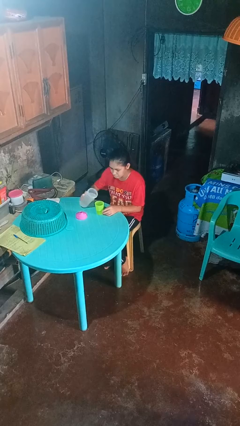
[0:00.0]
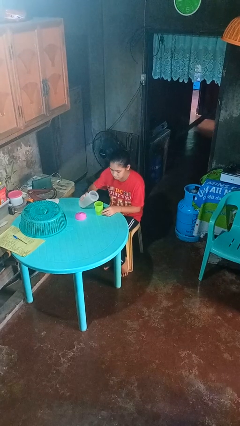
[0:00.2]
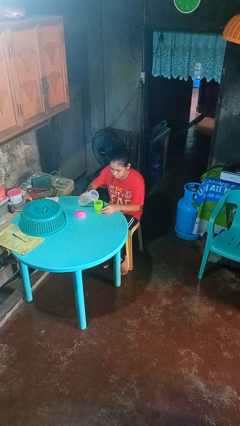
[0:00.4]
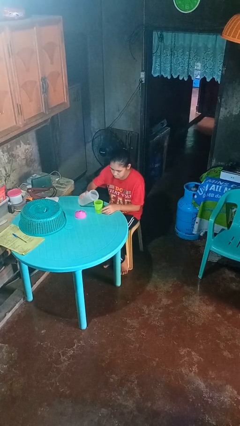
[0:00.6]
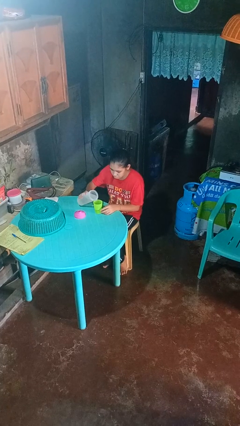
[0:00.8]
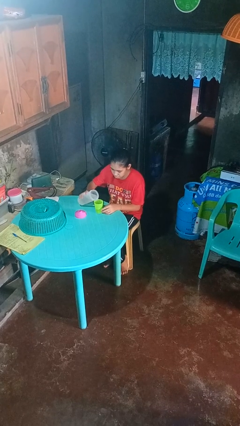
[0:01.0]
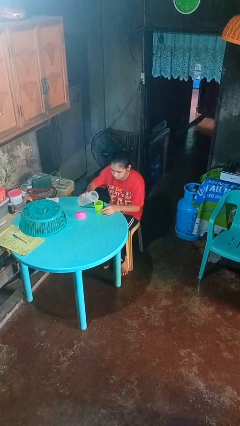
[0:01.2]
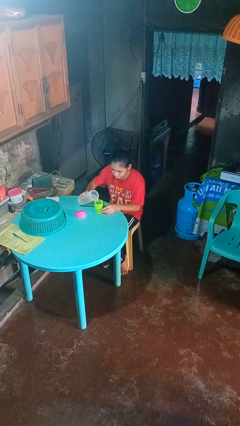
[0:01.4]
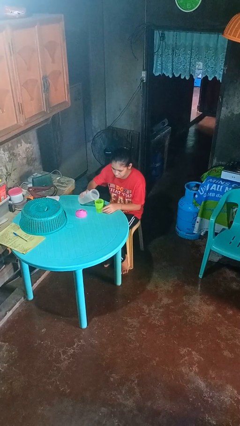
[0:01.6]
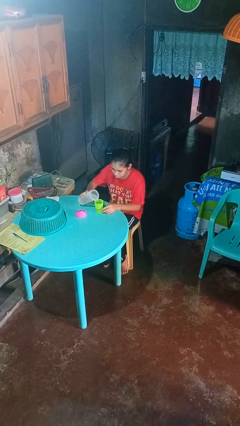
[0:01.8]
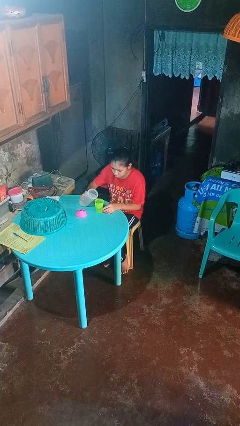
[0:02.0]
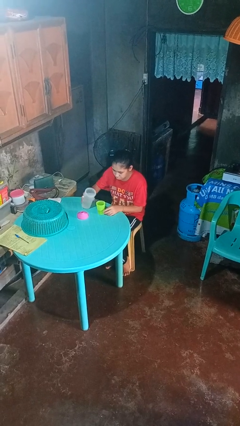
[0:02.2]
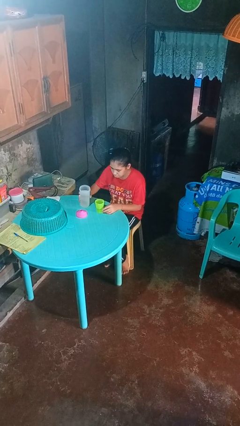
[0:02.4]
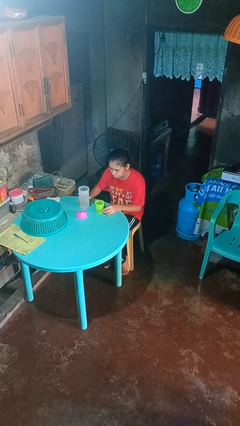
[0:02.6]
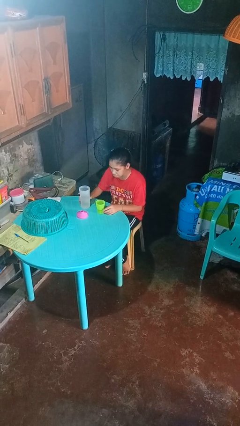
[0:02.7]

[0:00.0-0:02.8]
person pours liquid into cup

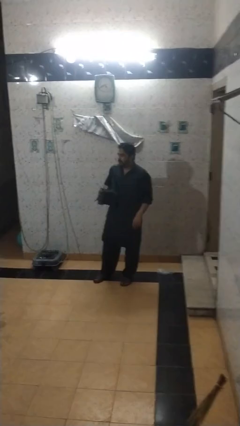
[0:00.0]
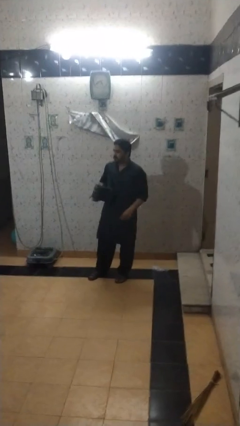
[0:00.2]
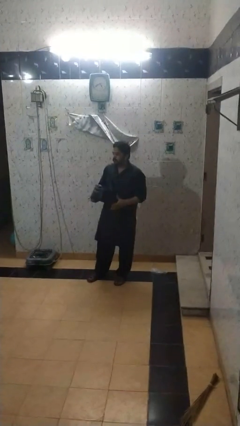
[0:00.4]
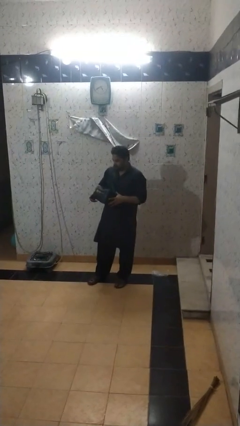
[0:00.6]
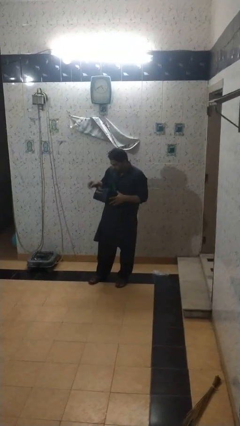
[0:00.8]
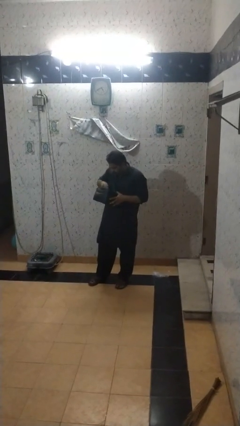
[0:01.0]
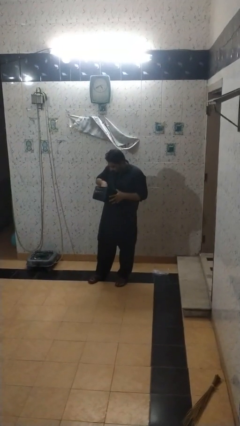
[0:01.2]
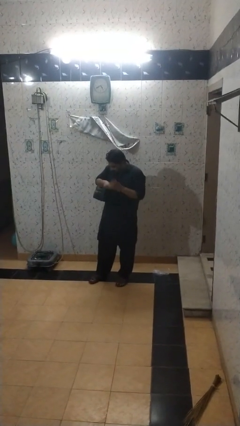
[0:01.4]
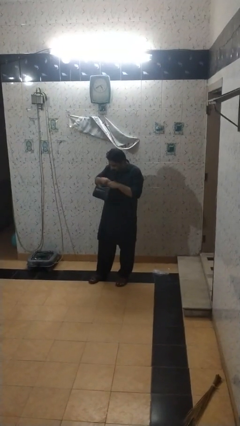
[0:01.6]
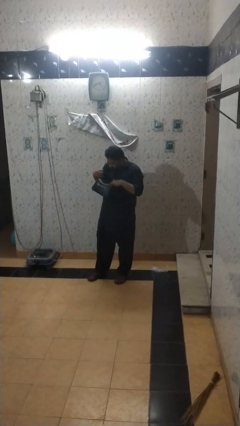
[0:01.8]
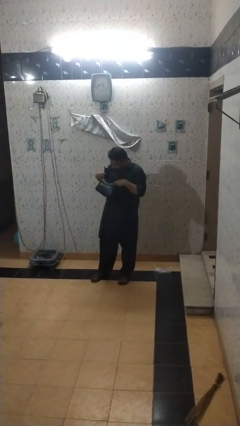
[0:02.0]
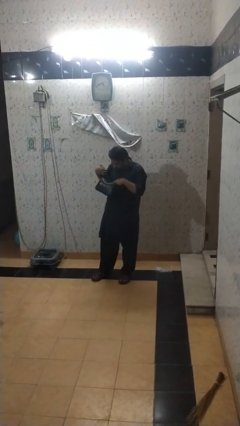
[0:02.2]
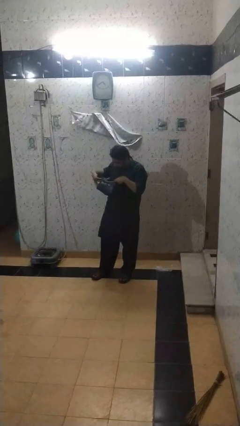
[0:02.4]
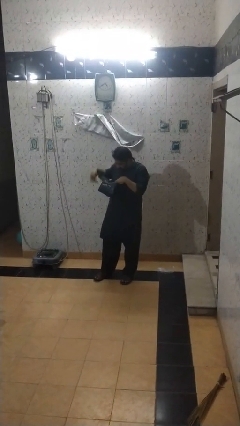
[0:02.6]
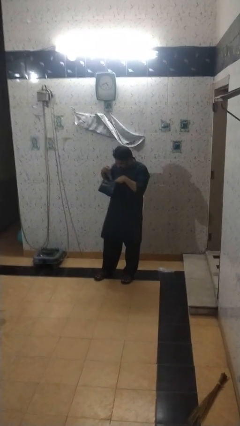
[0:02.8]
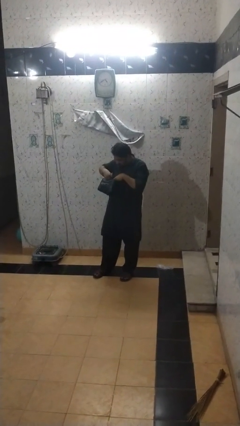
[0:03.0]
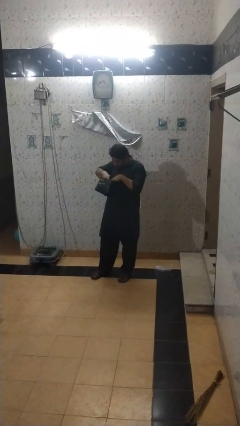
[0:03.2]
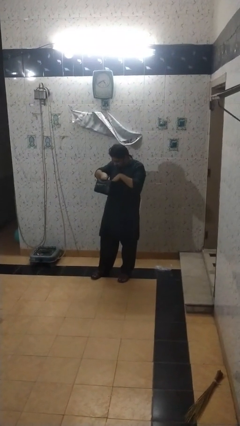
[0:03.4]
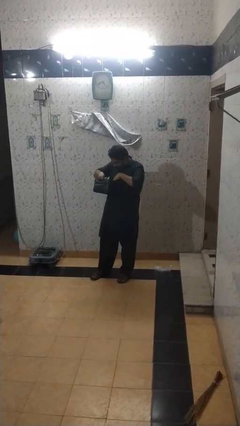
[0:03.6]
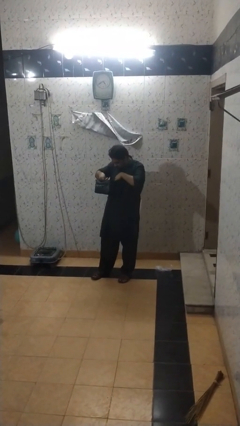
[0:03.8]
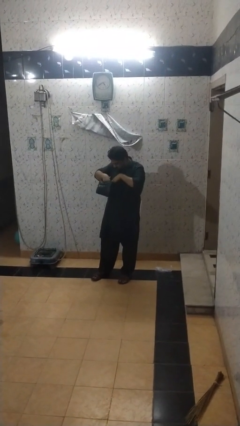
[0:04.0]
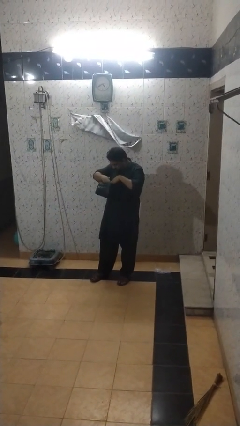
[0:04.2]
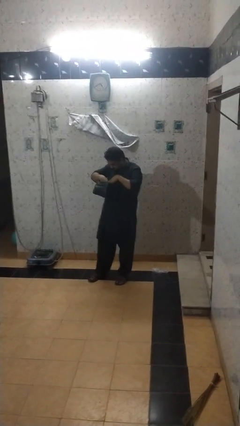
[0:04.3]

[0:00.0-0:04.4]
person searches in backpack

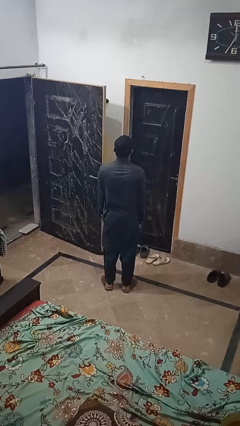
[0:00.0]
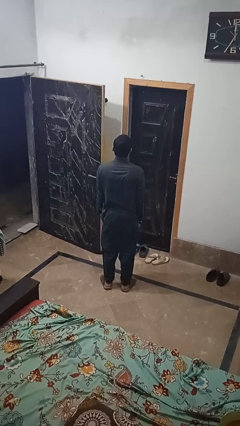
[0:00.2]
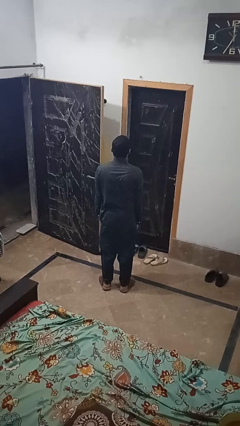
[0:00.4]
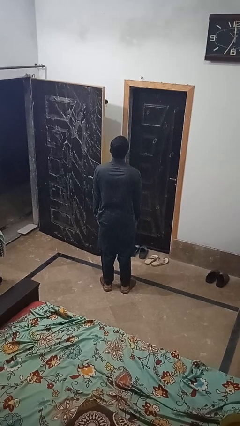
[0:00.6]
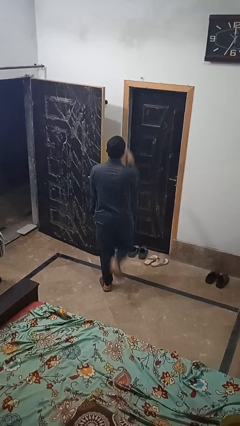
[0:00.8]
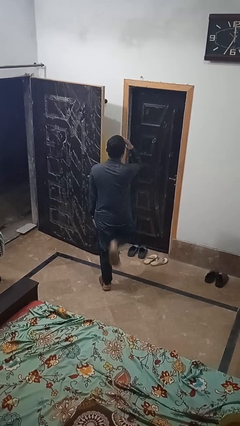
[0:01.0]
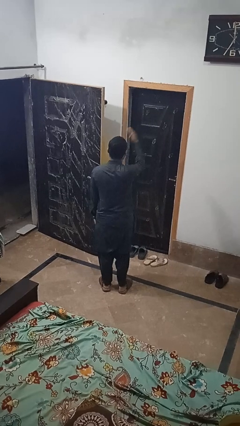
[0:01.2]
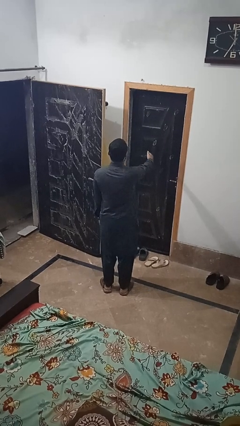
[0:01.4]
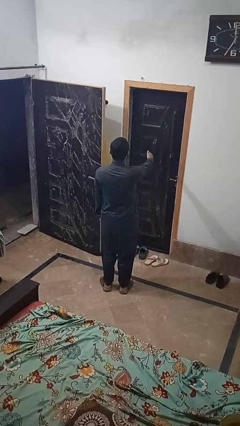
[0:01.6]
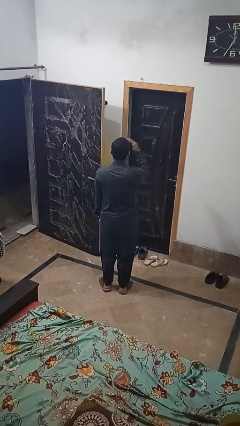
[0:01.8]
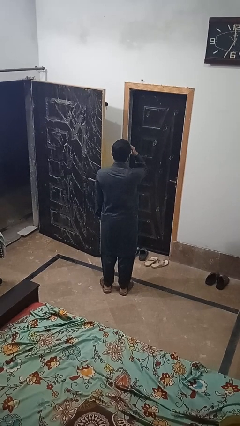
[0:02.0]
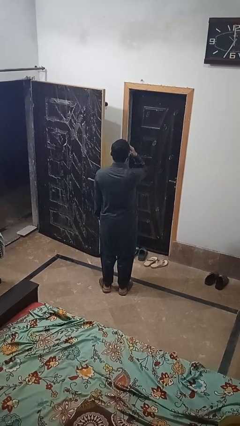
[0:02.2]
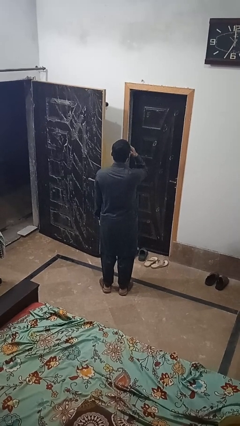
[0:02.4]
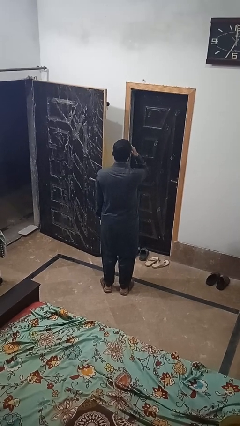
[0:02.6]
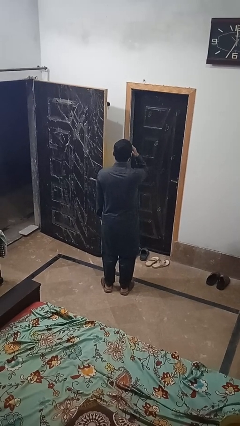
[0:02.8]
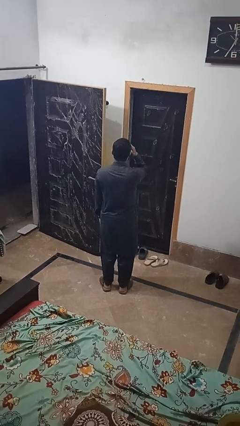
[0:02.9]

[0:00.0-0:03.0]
person salutes

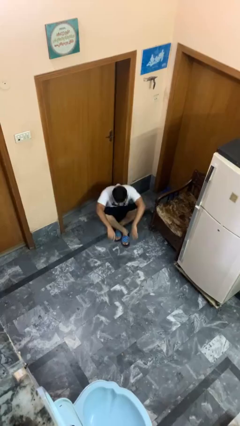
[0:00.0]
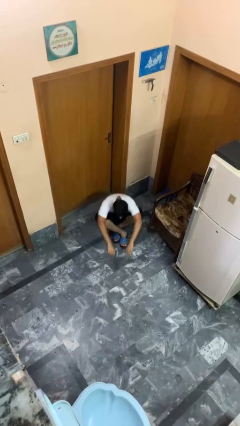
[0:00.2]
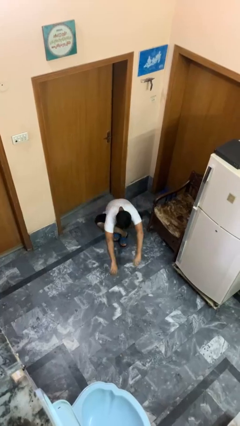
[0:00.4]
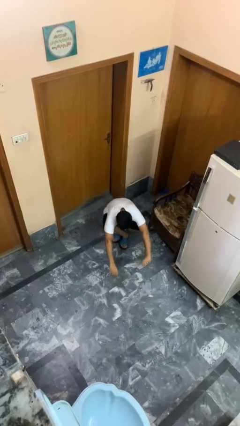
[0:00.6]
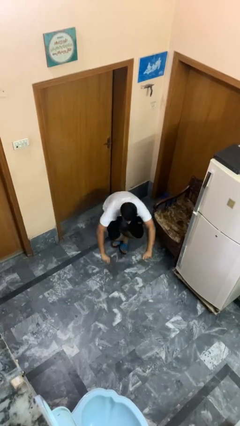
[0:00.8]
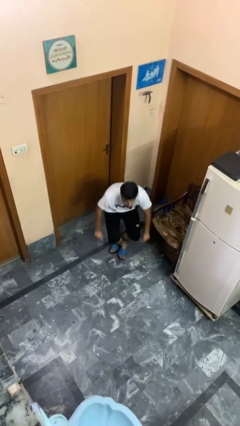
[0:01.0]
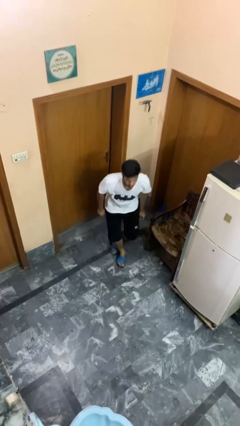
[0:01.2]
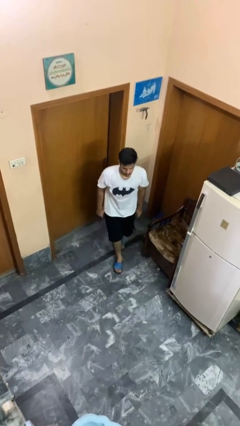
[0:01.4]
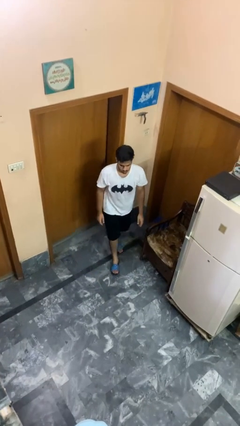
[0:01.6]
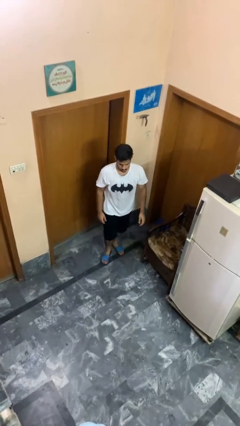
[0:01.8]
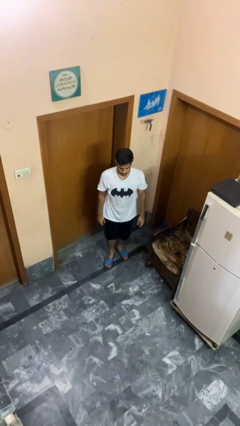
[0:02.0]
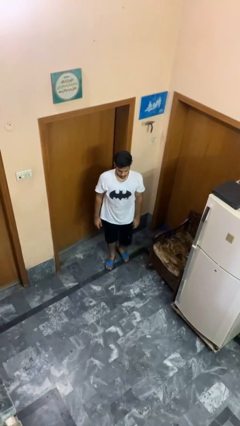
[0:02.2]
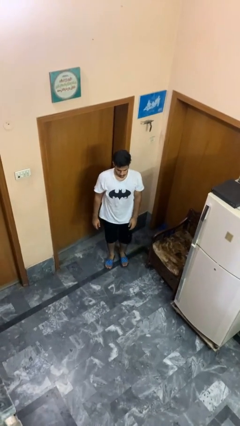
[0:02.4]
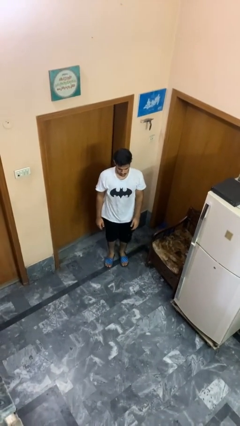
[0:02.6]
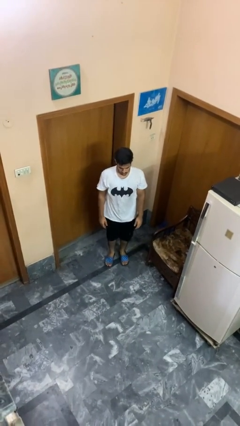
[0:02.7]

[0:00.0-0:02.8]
person stands up from floor

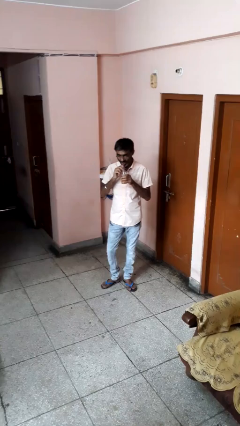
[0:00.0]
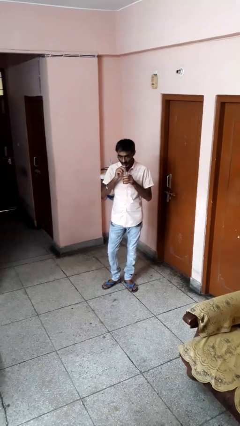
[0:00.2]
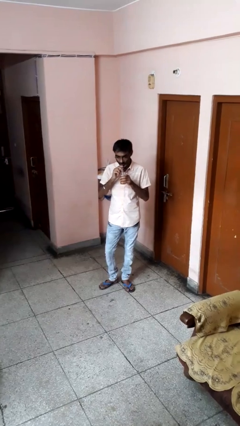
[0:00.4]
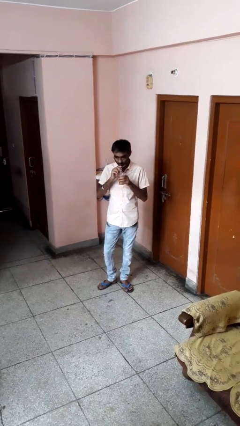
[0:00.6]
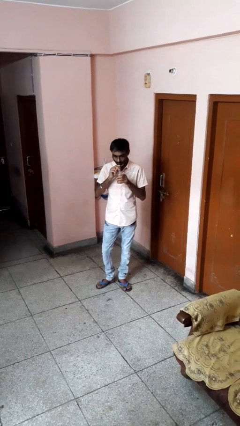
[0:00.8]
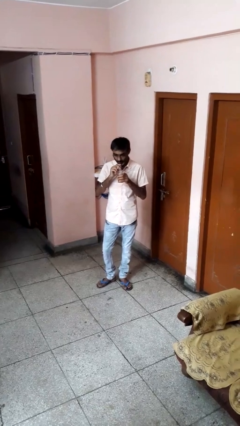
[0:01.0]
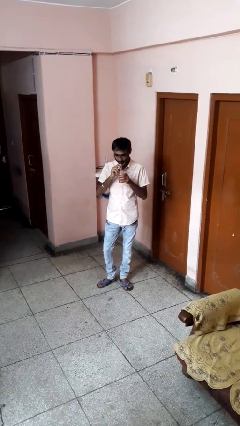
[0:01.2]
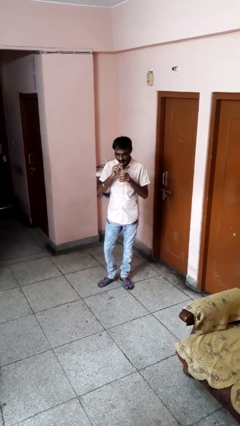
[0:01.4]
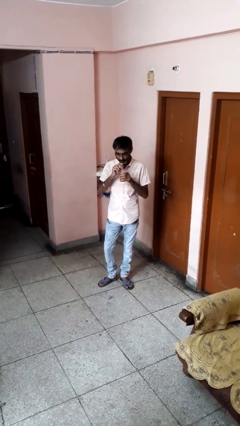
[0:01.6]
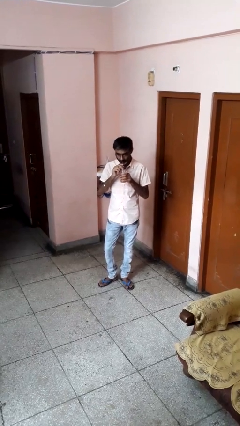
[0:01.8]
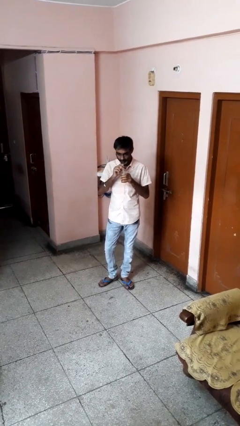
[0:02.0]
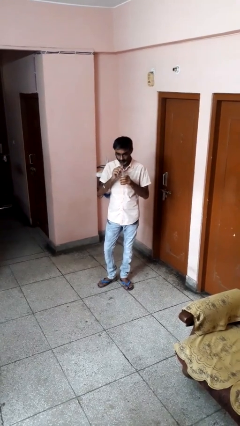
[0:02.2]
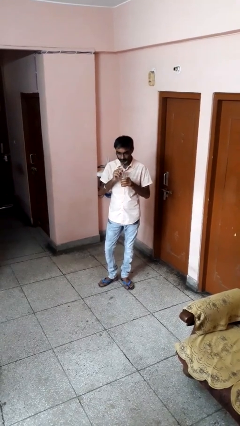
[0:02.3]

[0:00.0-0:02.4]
person drinks from straw

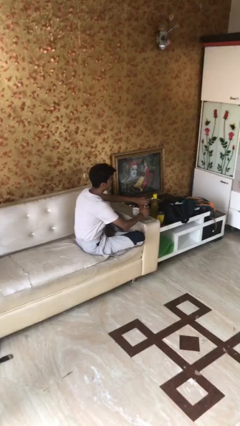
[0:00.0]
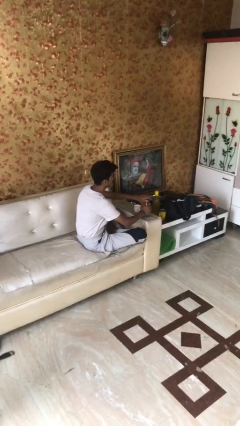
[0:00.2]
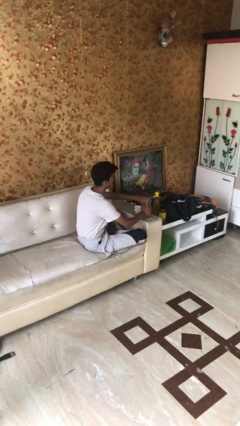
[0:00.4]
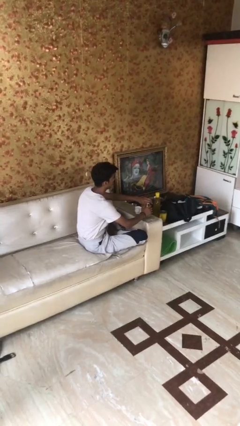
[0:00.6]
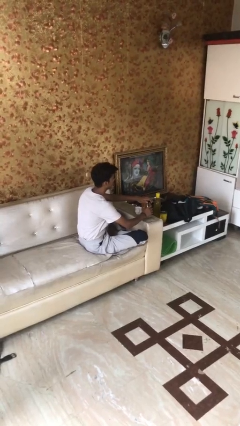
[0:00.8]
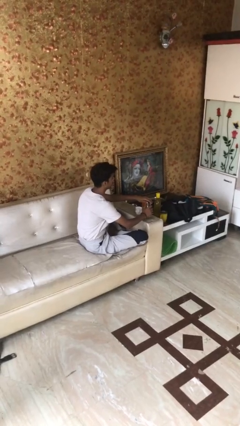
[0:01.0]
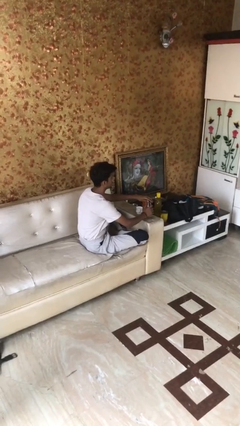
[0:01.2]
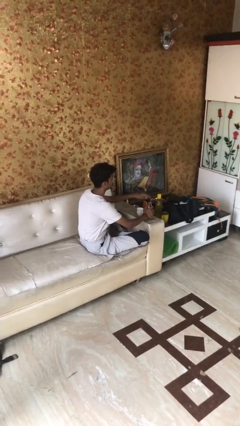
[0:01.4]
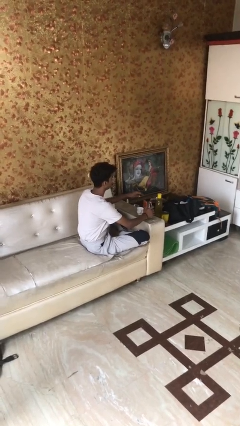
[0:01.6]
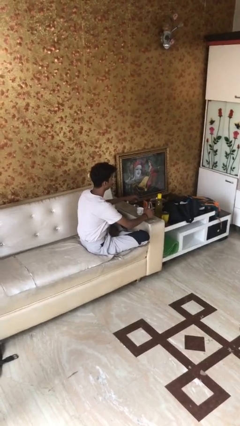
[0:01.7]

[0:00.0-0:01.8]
person unscrews lid from bottle

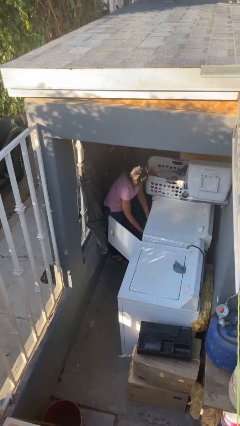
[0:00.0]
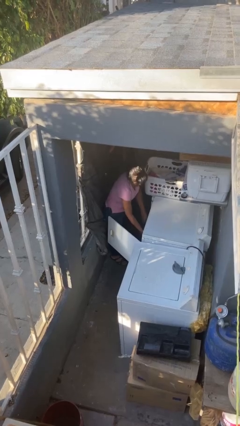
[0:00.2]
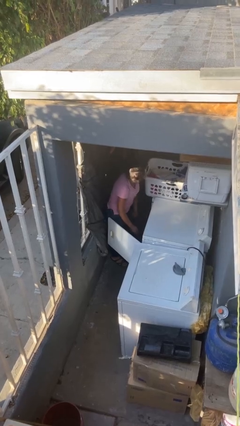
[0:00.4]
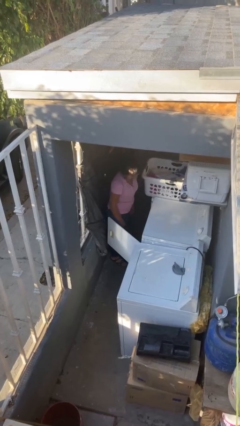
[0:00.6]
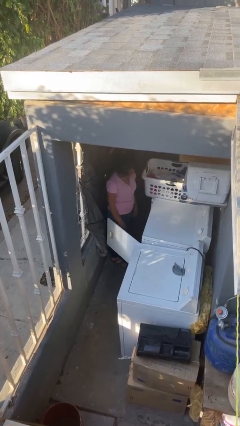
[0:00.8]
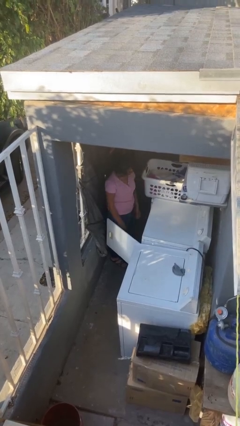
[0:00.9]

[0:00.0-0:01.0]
person loads dryer
